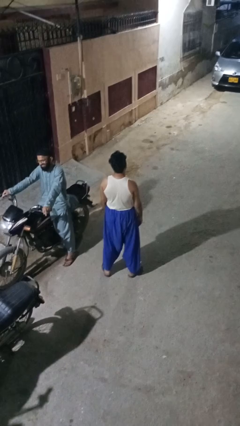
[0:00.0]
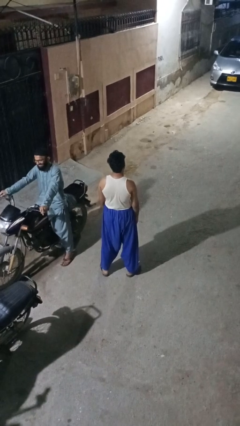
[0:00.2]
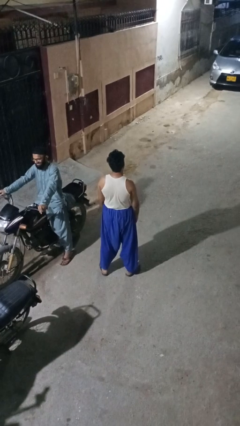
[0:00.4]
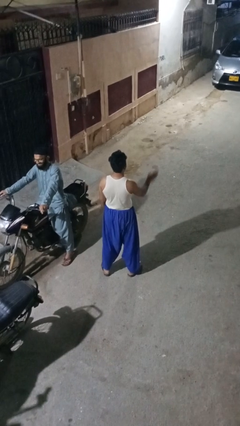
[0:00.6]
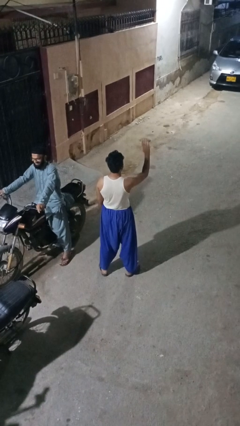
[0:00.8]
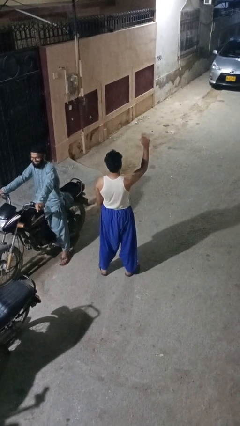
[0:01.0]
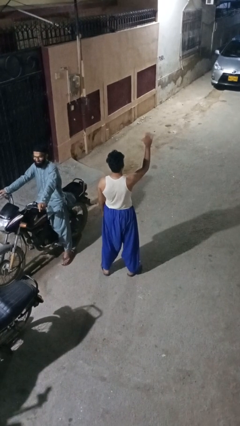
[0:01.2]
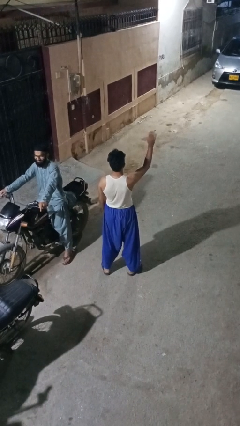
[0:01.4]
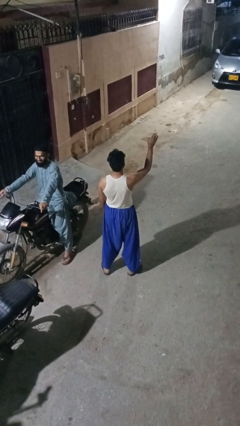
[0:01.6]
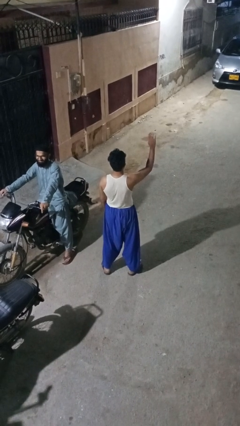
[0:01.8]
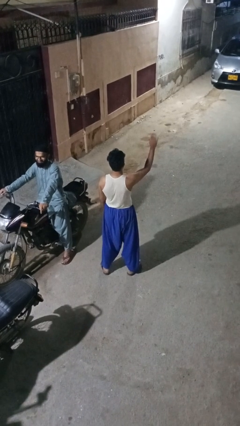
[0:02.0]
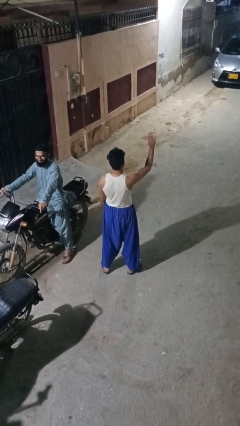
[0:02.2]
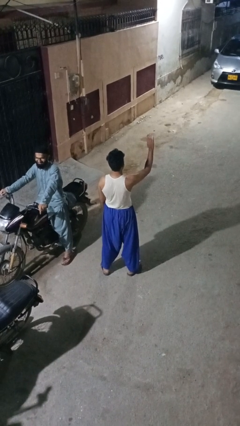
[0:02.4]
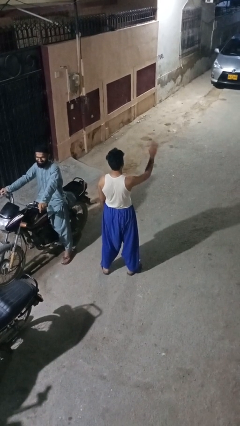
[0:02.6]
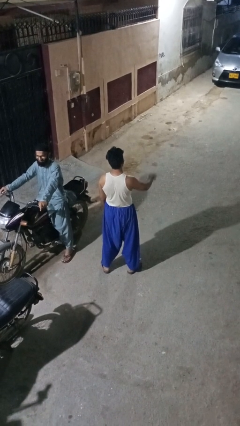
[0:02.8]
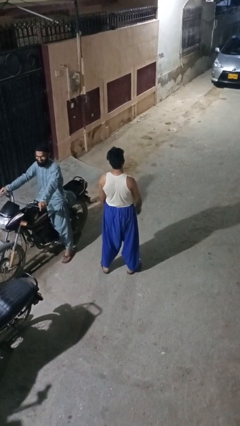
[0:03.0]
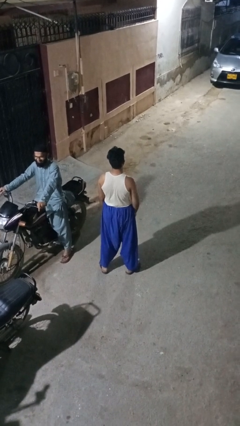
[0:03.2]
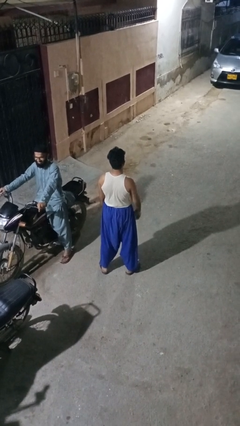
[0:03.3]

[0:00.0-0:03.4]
person waves at person

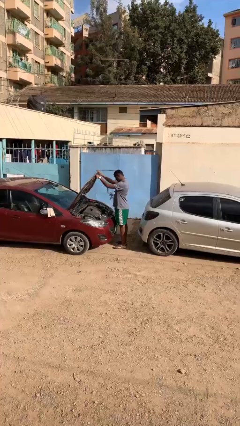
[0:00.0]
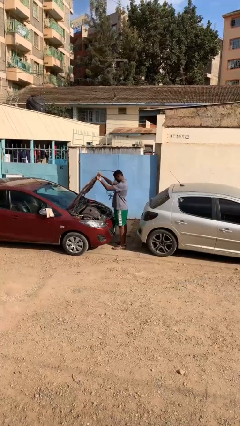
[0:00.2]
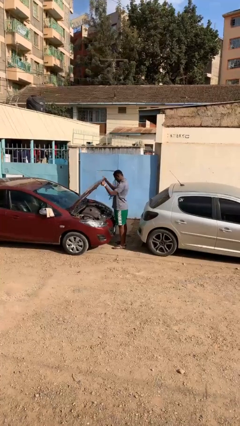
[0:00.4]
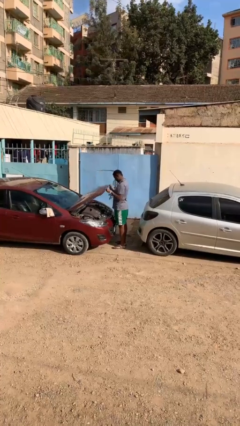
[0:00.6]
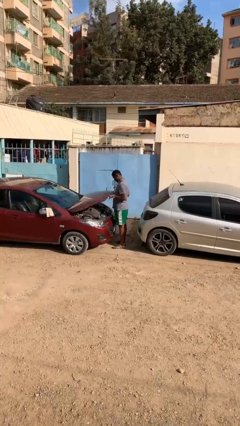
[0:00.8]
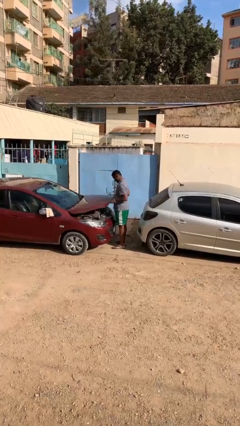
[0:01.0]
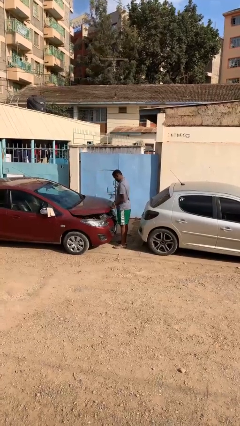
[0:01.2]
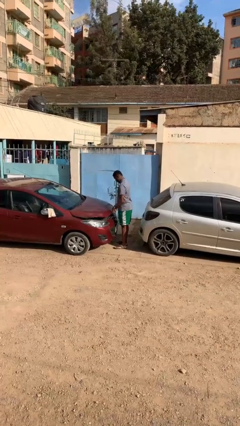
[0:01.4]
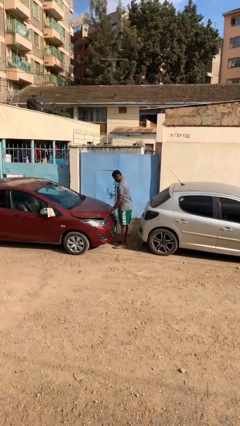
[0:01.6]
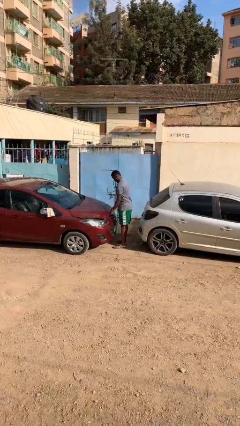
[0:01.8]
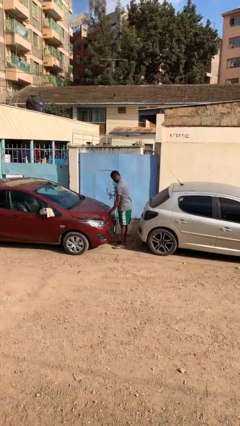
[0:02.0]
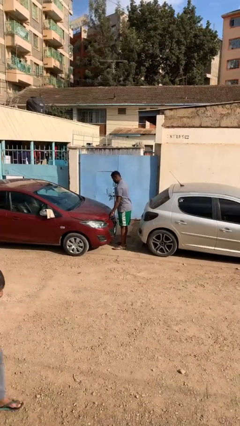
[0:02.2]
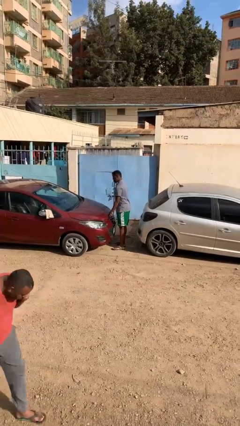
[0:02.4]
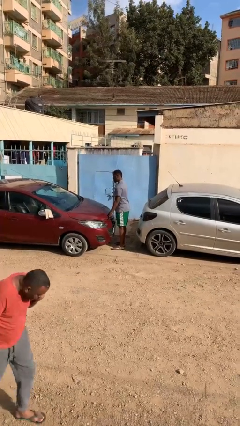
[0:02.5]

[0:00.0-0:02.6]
person closes car hood

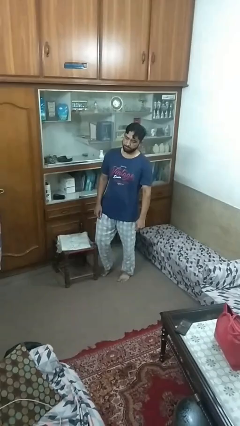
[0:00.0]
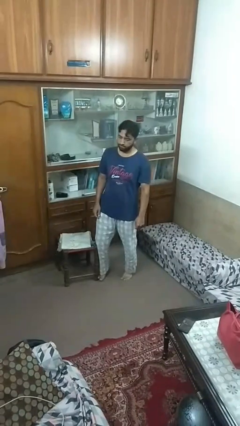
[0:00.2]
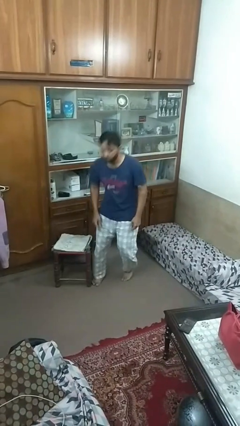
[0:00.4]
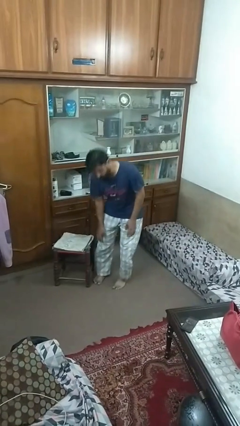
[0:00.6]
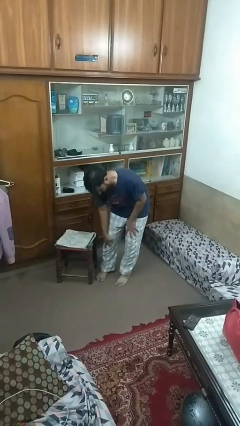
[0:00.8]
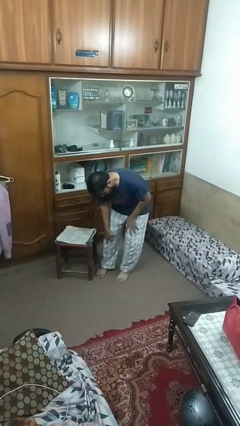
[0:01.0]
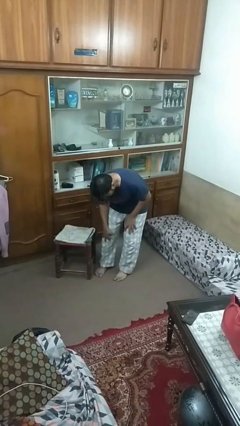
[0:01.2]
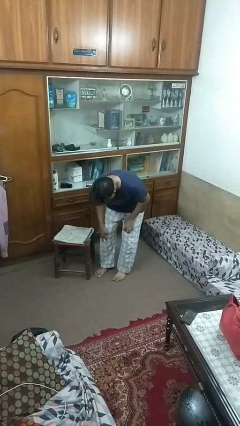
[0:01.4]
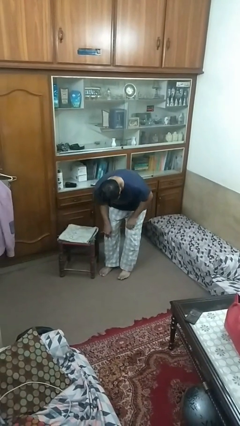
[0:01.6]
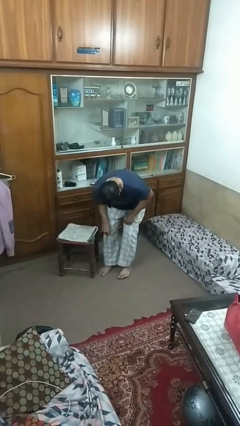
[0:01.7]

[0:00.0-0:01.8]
person trips on object on floor

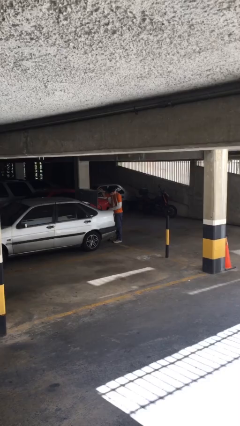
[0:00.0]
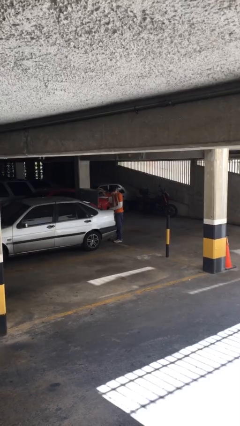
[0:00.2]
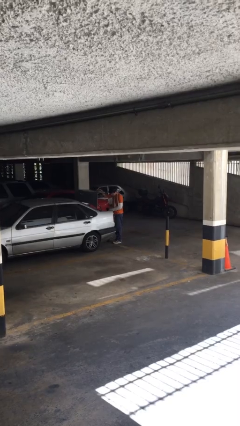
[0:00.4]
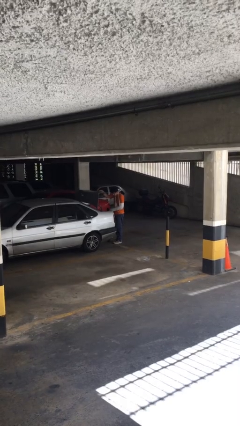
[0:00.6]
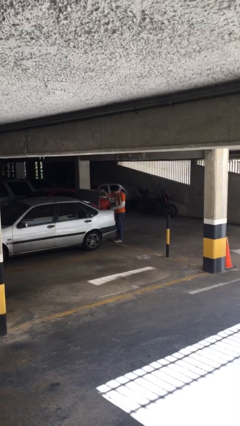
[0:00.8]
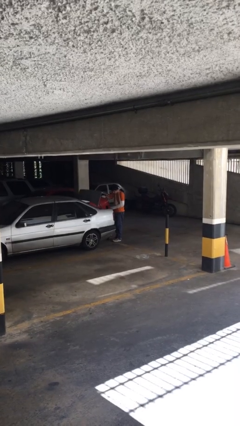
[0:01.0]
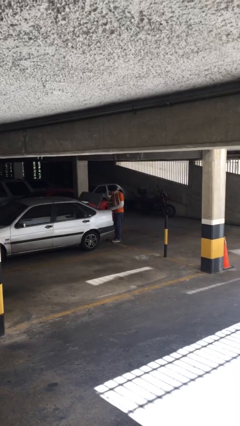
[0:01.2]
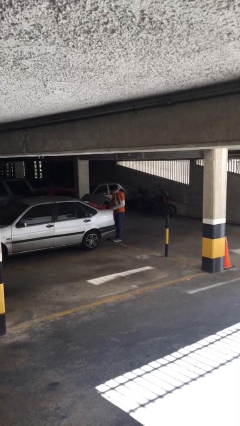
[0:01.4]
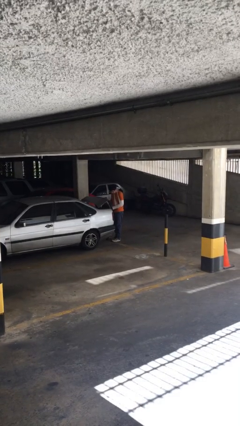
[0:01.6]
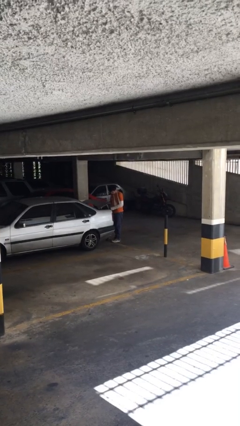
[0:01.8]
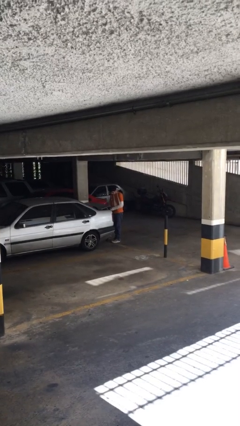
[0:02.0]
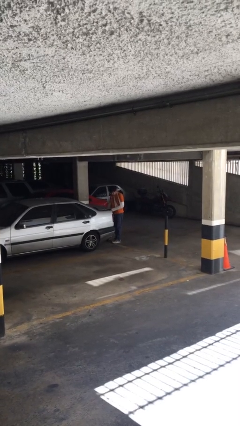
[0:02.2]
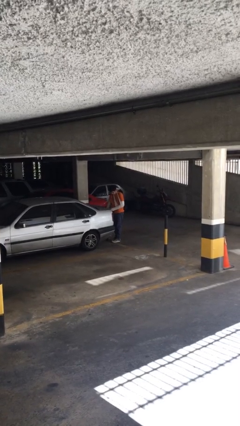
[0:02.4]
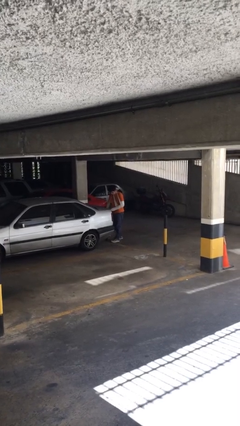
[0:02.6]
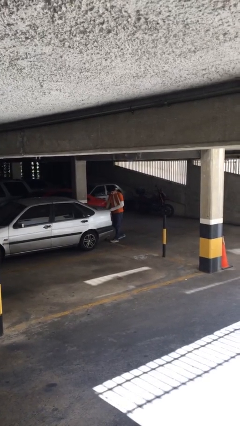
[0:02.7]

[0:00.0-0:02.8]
person closes car trunk

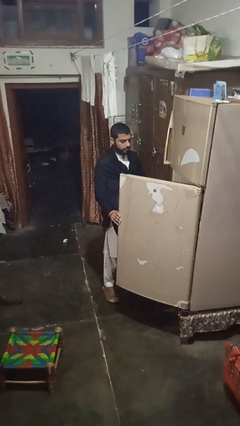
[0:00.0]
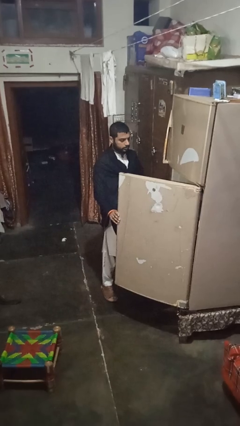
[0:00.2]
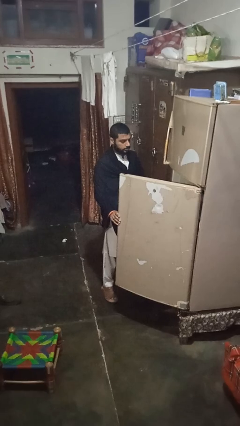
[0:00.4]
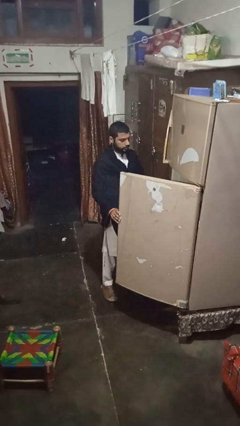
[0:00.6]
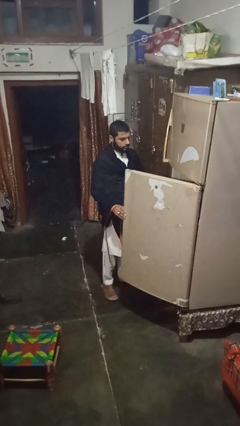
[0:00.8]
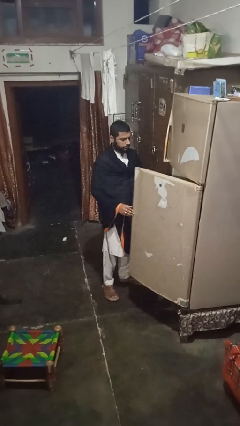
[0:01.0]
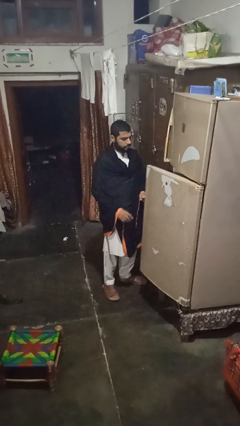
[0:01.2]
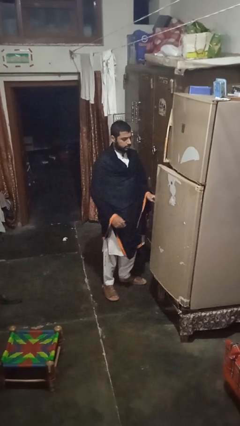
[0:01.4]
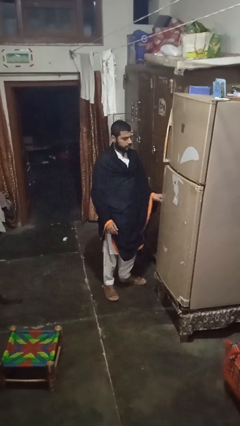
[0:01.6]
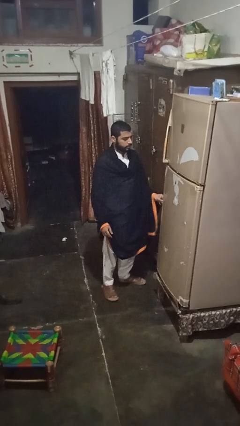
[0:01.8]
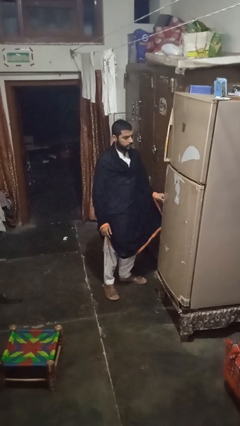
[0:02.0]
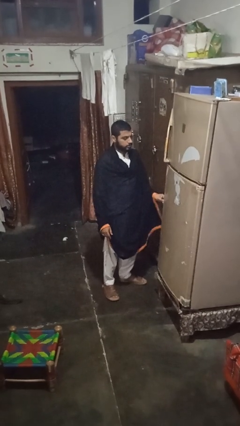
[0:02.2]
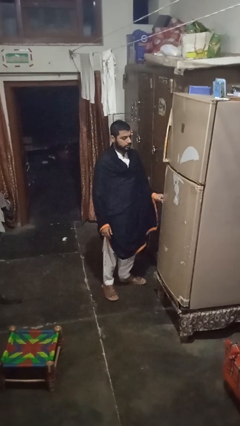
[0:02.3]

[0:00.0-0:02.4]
person closes refrigerator

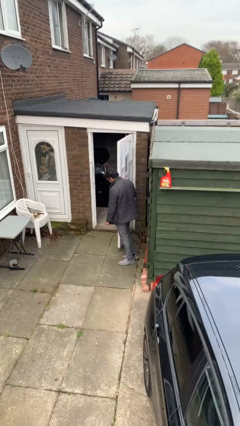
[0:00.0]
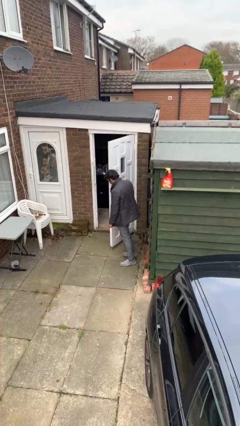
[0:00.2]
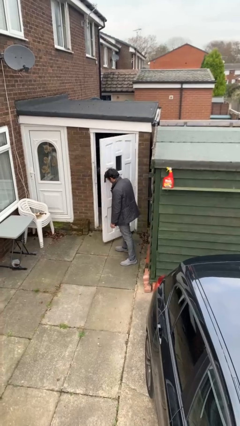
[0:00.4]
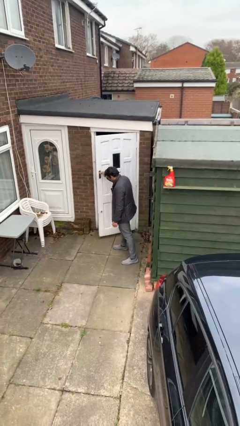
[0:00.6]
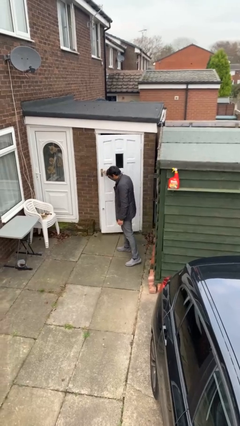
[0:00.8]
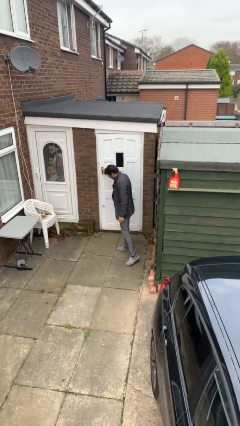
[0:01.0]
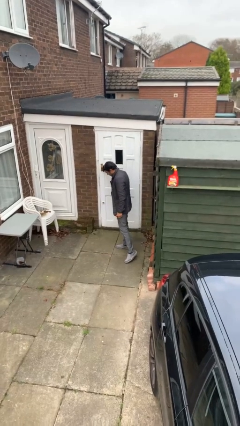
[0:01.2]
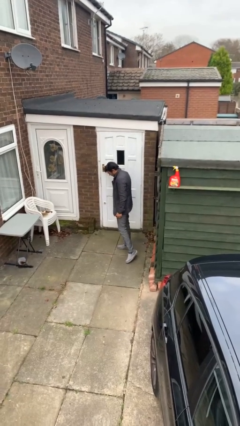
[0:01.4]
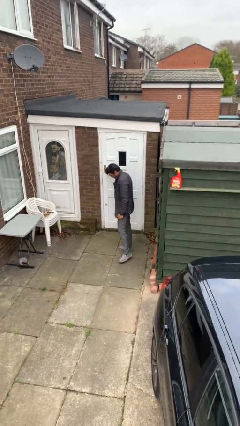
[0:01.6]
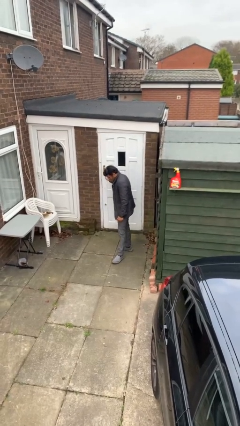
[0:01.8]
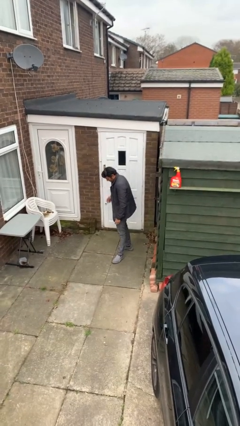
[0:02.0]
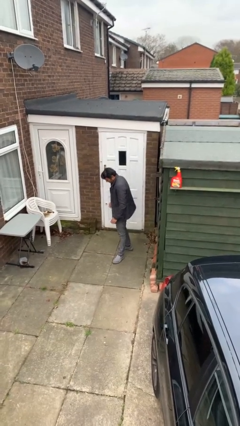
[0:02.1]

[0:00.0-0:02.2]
person closes facility door

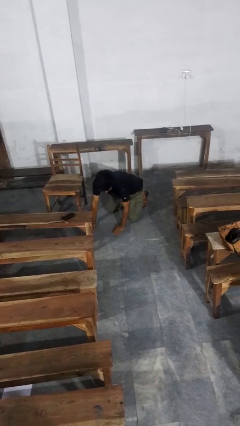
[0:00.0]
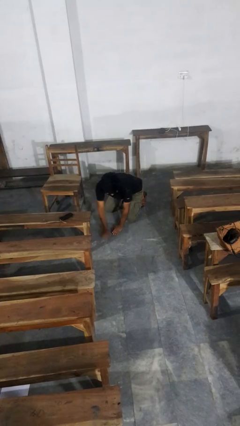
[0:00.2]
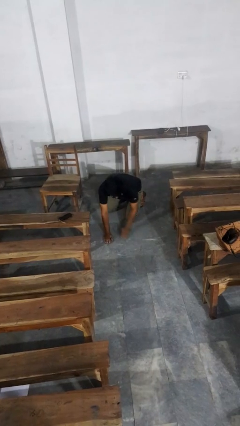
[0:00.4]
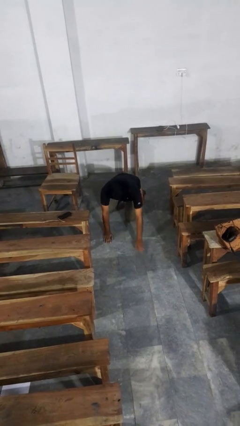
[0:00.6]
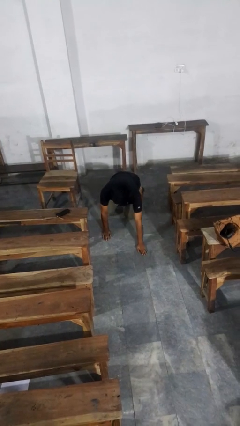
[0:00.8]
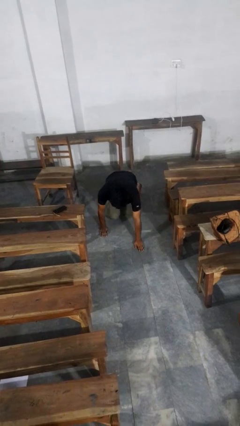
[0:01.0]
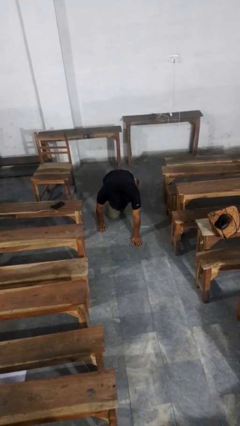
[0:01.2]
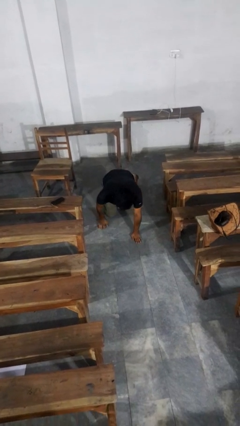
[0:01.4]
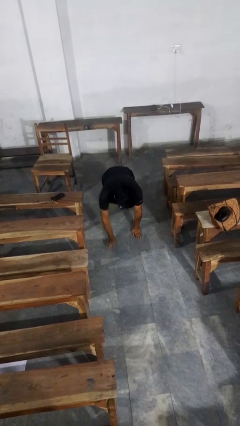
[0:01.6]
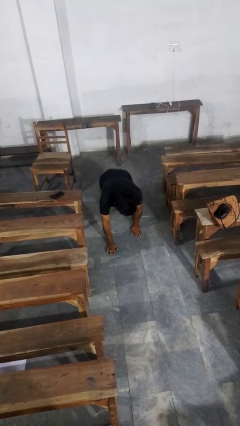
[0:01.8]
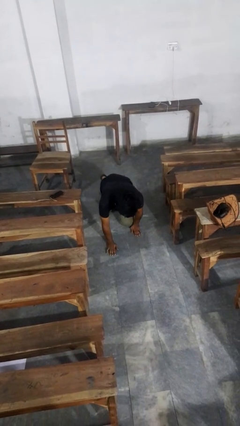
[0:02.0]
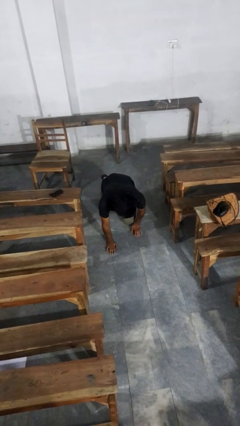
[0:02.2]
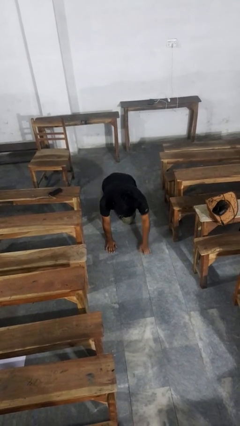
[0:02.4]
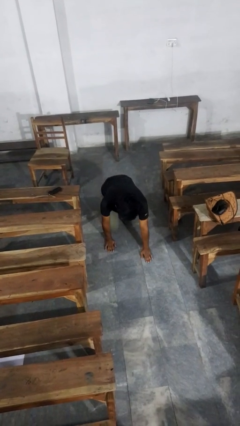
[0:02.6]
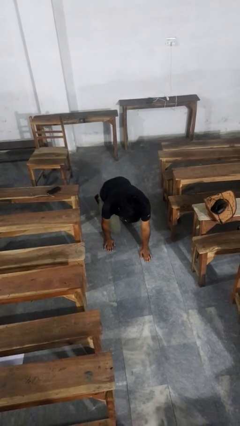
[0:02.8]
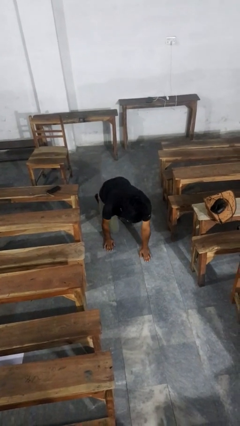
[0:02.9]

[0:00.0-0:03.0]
person crawls
